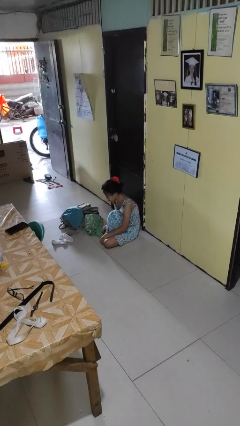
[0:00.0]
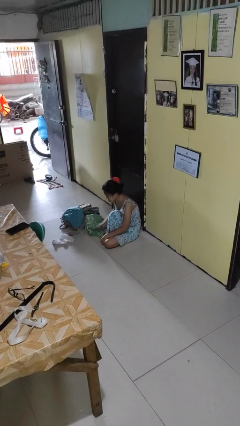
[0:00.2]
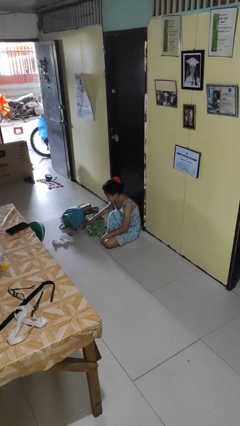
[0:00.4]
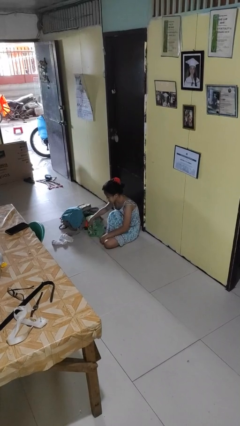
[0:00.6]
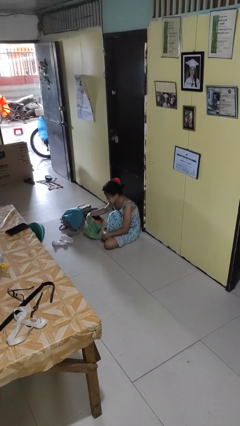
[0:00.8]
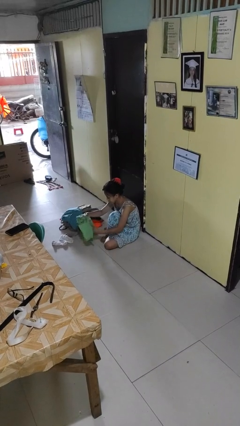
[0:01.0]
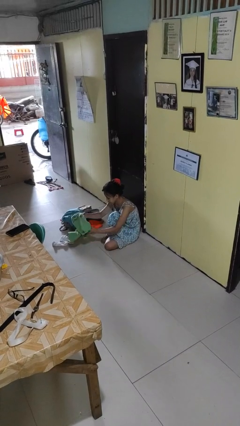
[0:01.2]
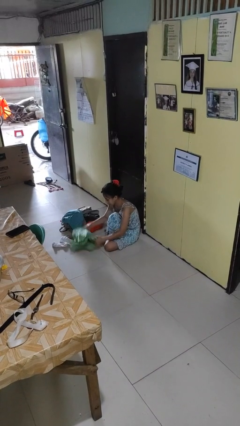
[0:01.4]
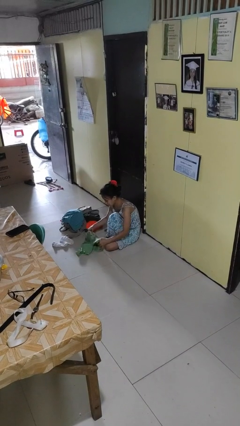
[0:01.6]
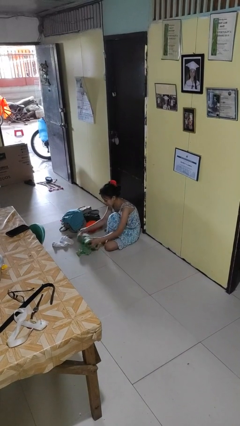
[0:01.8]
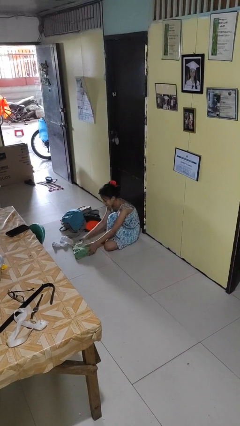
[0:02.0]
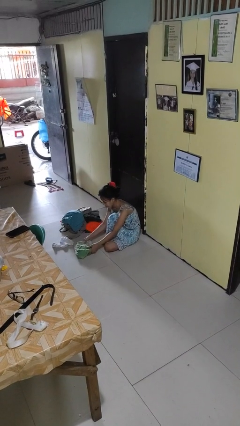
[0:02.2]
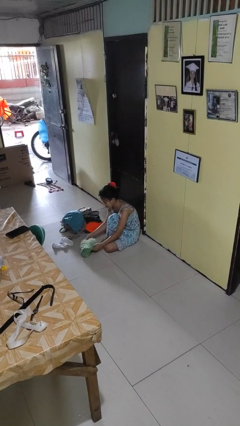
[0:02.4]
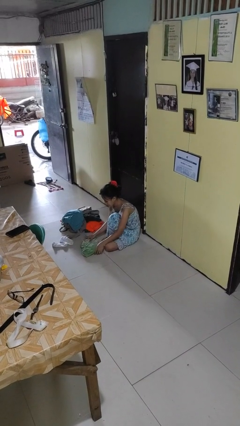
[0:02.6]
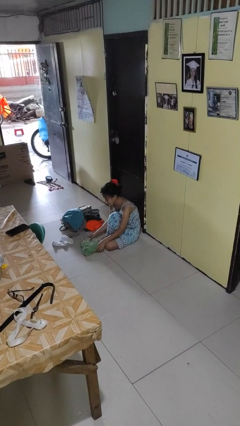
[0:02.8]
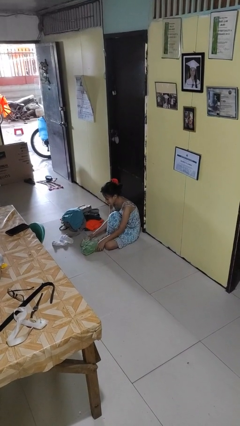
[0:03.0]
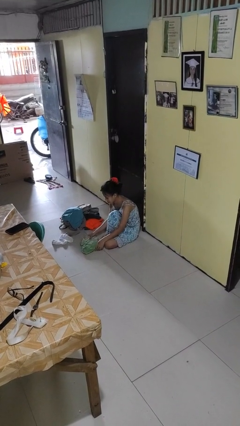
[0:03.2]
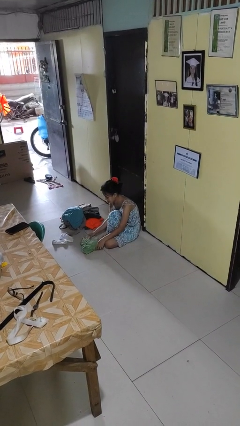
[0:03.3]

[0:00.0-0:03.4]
person folds shirt

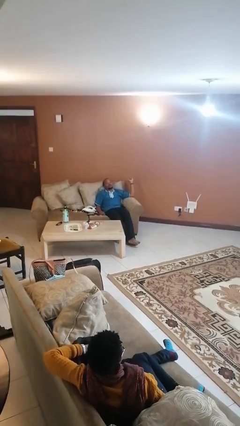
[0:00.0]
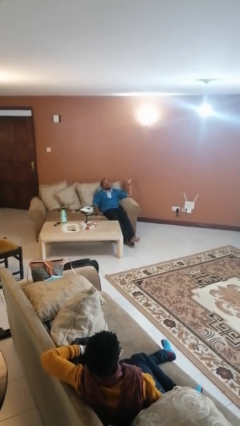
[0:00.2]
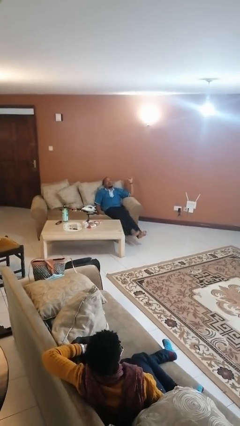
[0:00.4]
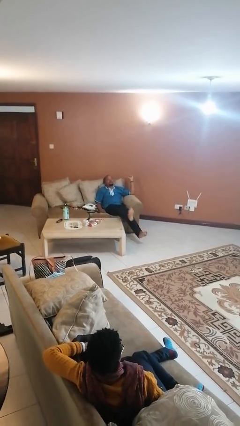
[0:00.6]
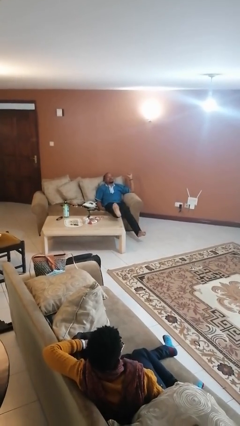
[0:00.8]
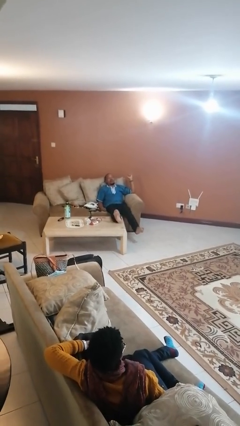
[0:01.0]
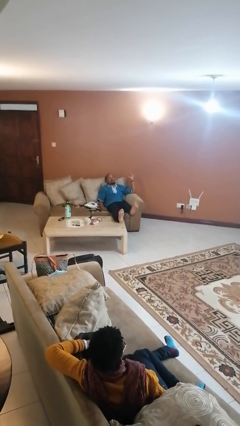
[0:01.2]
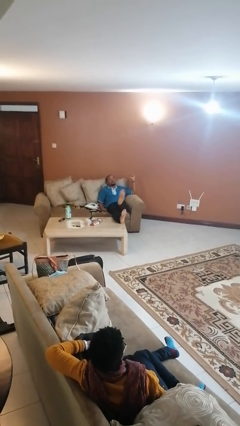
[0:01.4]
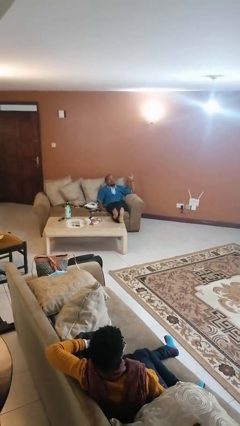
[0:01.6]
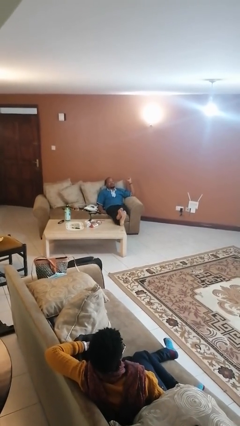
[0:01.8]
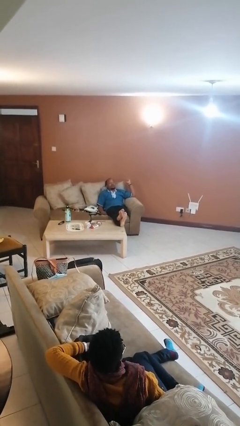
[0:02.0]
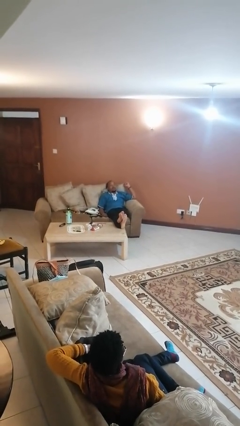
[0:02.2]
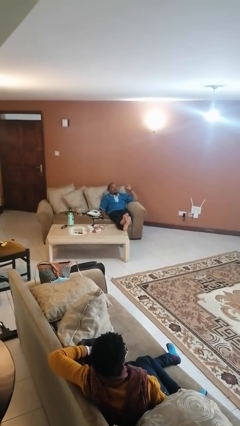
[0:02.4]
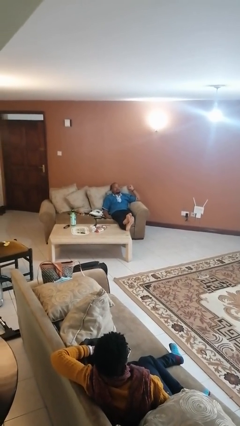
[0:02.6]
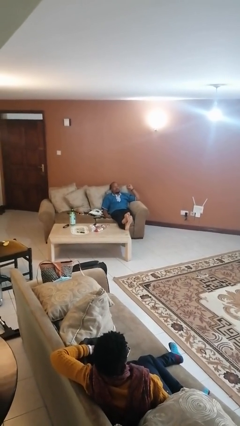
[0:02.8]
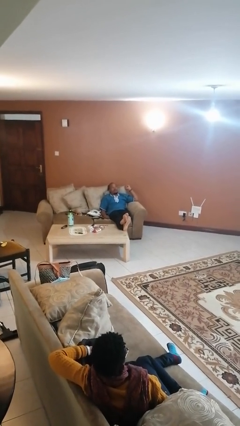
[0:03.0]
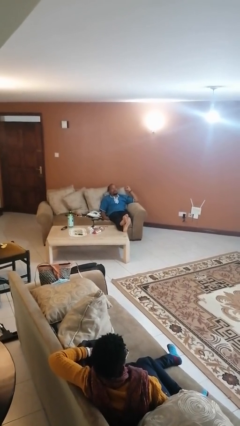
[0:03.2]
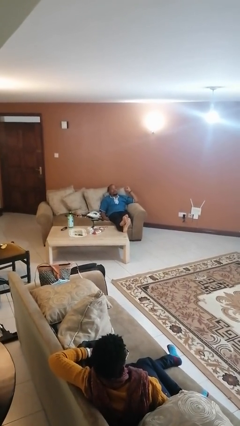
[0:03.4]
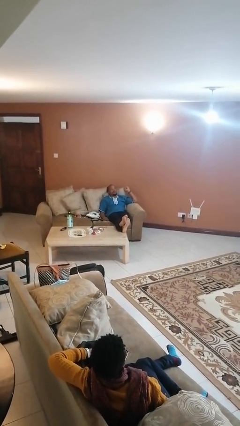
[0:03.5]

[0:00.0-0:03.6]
person puts feet up

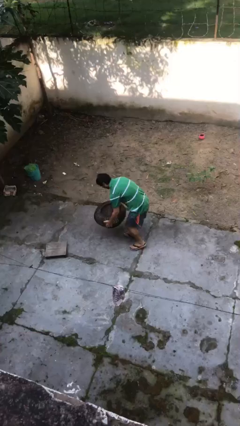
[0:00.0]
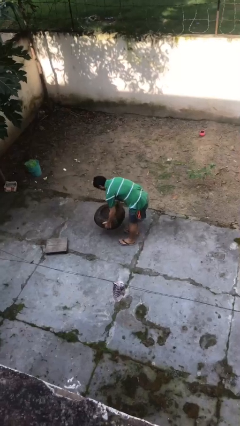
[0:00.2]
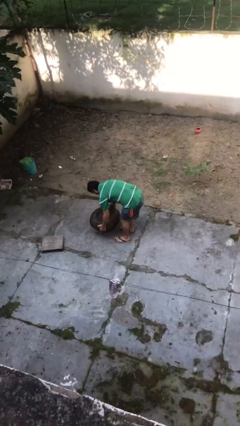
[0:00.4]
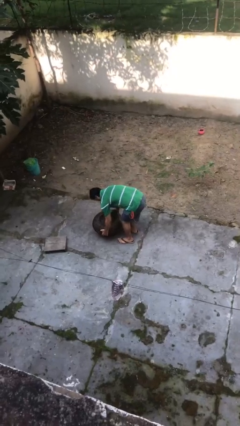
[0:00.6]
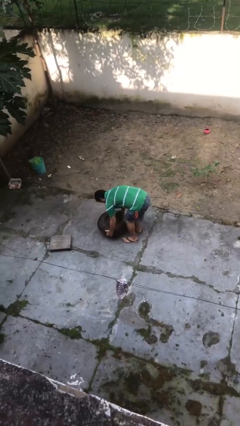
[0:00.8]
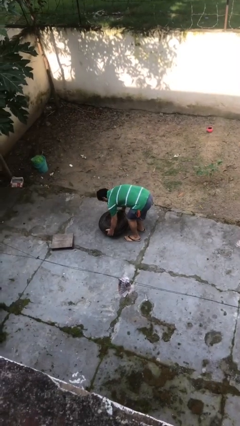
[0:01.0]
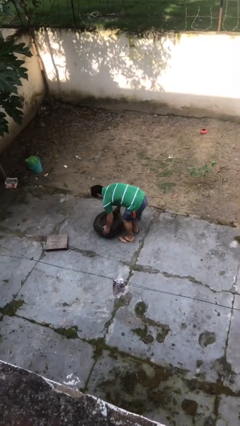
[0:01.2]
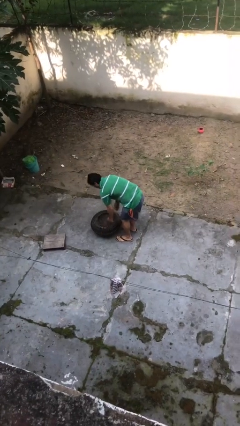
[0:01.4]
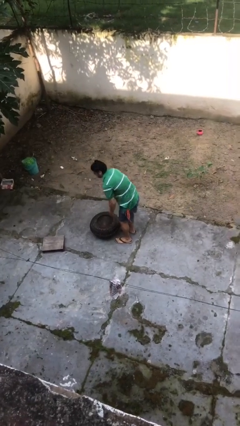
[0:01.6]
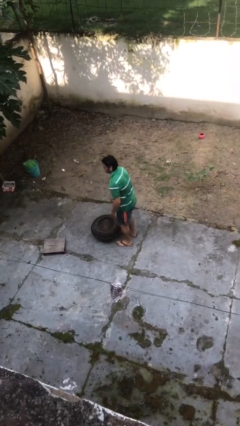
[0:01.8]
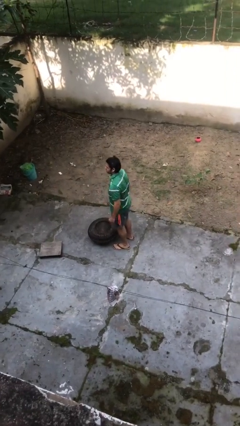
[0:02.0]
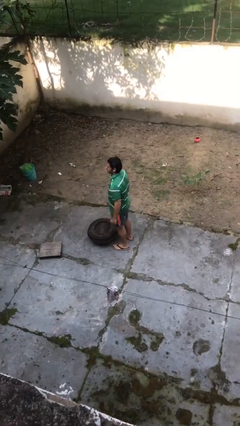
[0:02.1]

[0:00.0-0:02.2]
person puts down object on floor

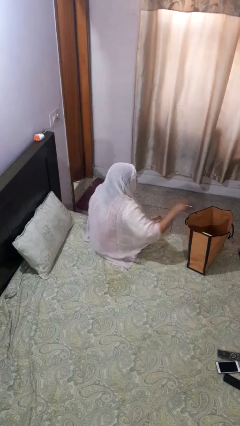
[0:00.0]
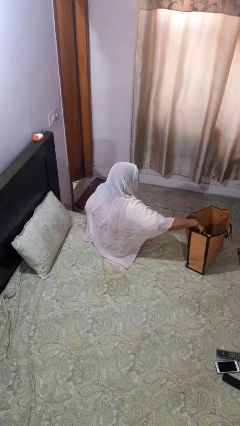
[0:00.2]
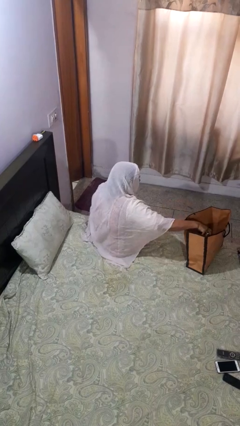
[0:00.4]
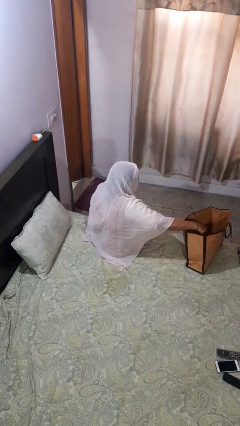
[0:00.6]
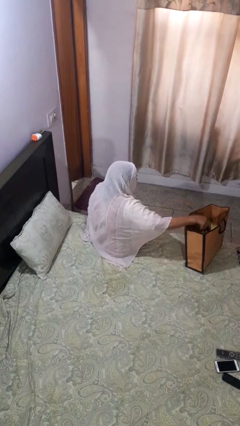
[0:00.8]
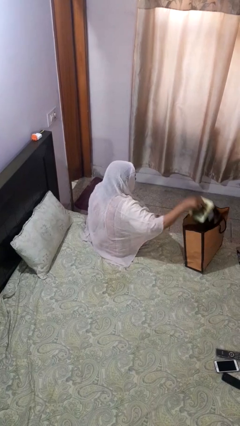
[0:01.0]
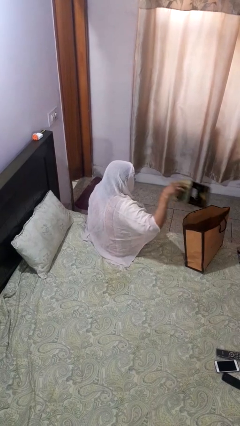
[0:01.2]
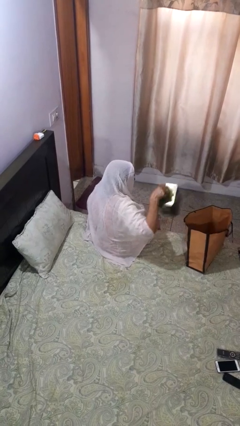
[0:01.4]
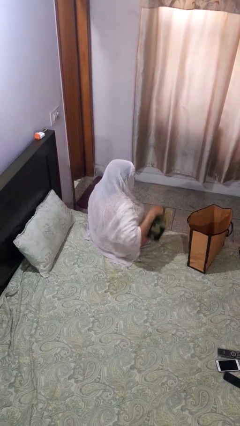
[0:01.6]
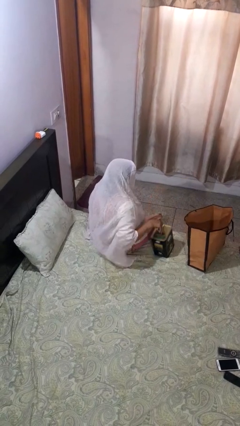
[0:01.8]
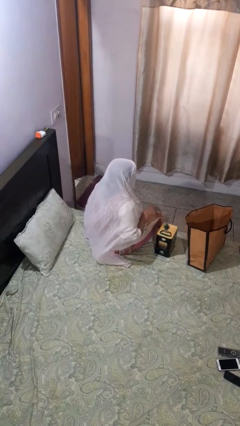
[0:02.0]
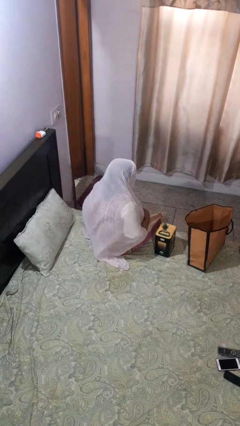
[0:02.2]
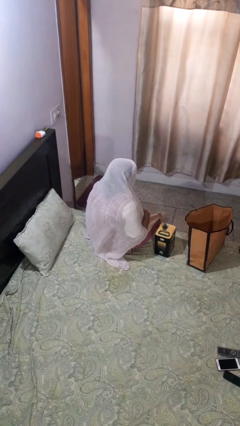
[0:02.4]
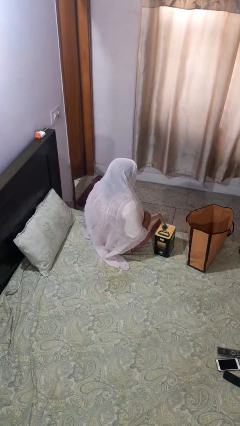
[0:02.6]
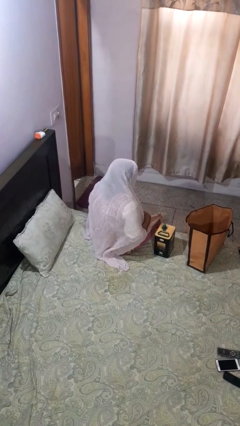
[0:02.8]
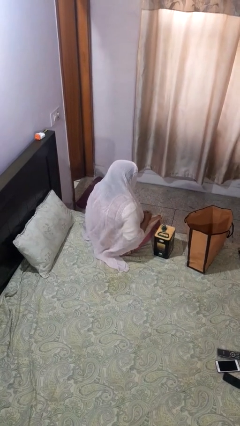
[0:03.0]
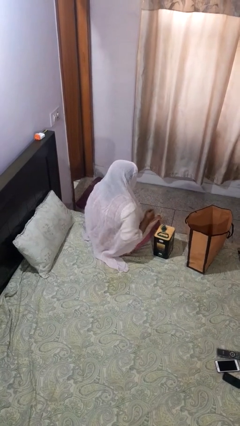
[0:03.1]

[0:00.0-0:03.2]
person takes object from bag

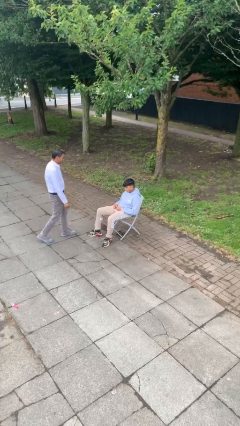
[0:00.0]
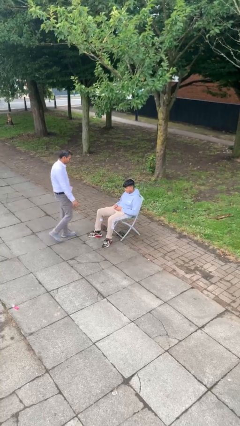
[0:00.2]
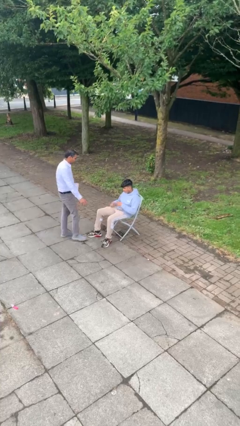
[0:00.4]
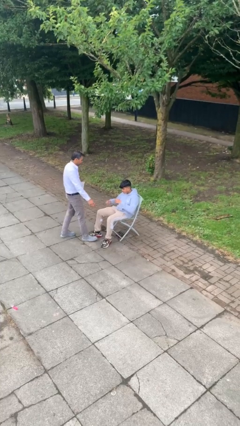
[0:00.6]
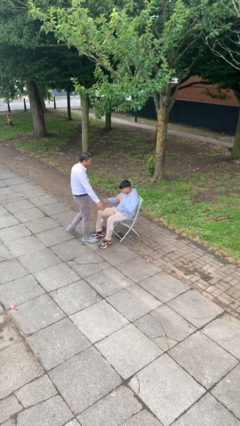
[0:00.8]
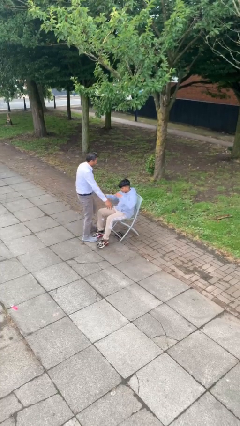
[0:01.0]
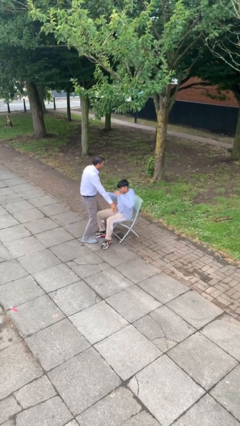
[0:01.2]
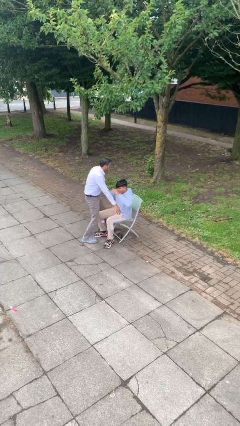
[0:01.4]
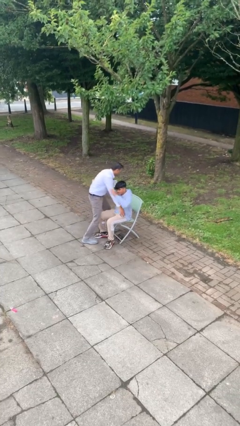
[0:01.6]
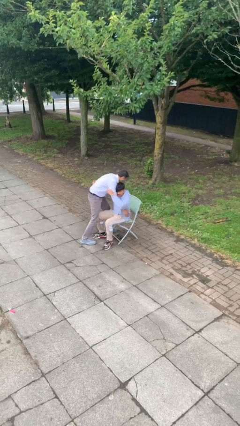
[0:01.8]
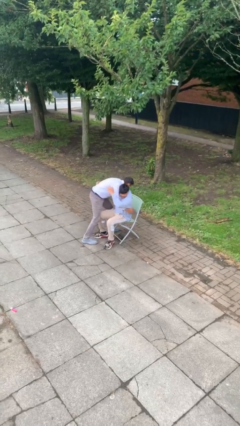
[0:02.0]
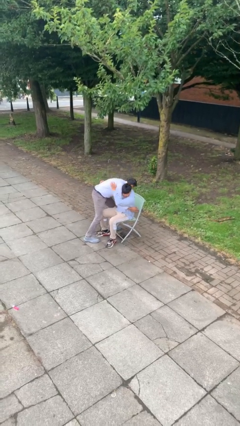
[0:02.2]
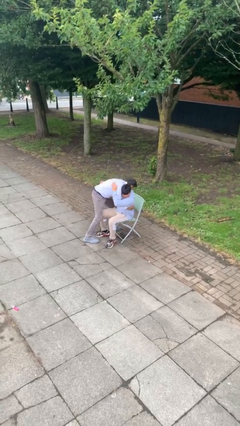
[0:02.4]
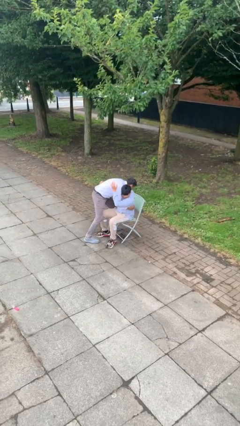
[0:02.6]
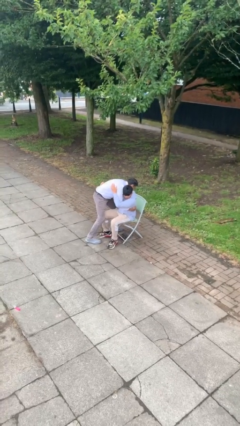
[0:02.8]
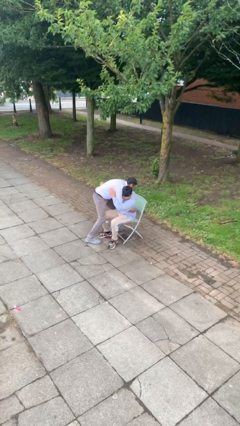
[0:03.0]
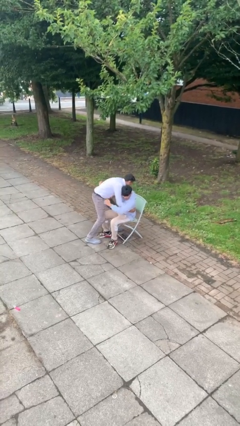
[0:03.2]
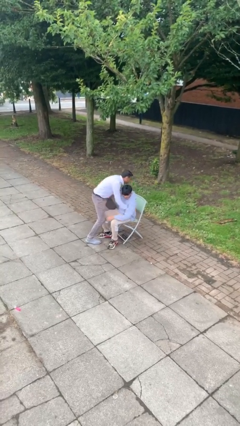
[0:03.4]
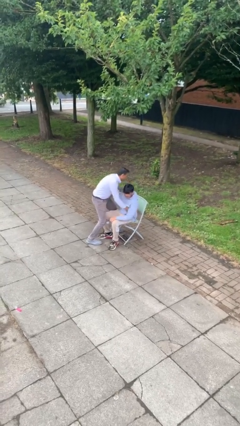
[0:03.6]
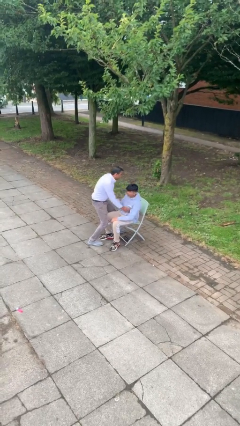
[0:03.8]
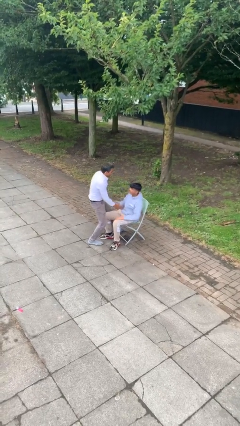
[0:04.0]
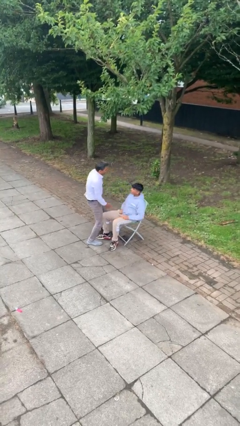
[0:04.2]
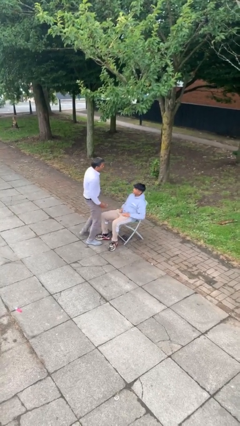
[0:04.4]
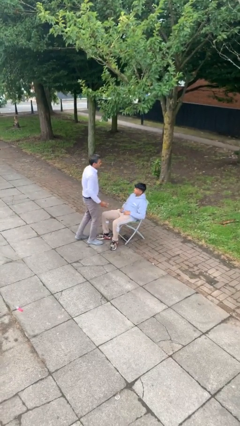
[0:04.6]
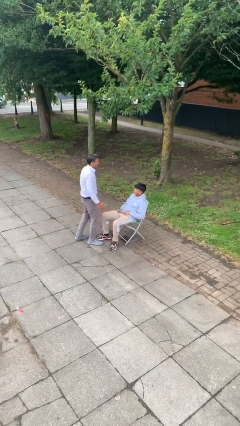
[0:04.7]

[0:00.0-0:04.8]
person embraces person

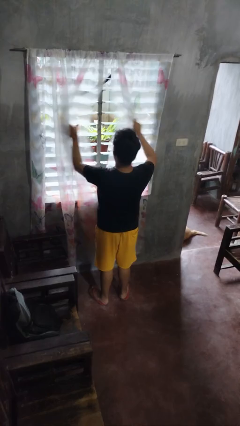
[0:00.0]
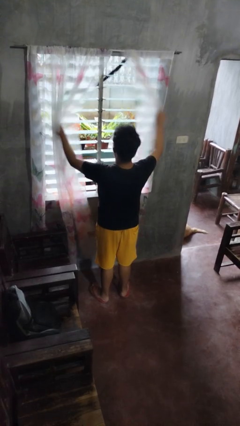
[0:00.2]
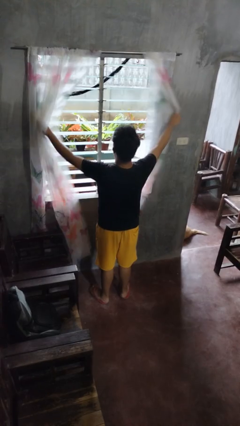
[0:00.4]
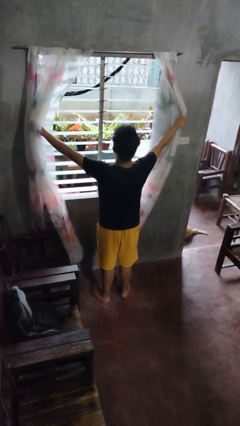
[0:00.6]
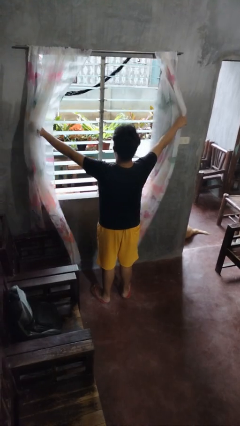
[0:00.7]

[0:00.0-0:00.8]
person opens curtains
